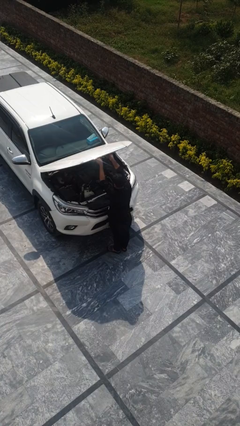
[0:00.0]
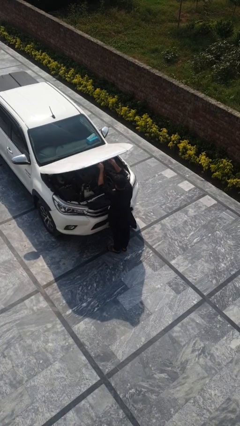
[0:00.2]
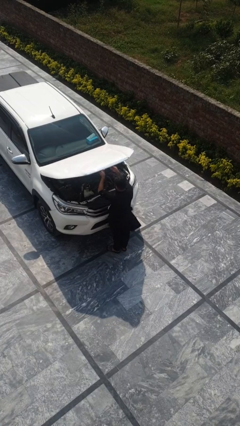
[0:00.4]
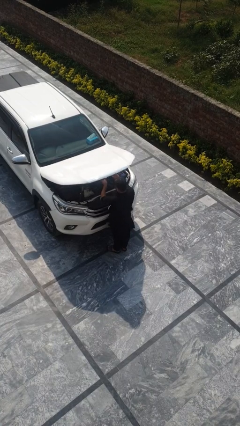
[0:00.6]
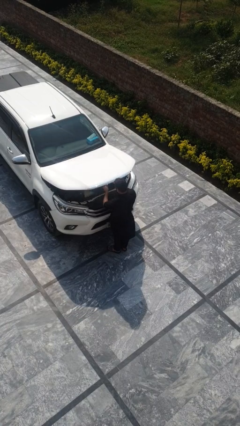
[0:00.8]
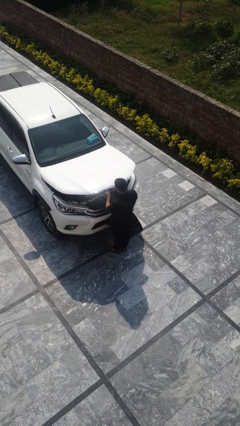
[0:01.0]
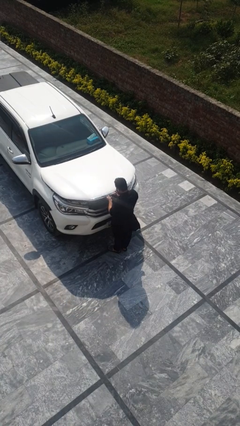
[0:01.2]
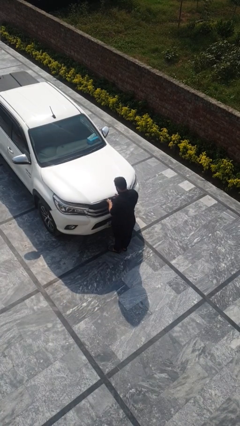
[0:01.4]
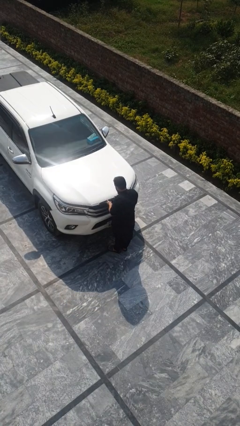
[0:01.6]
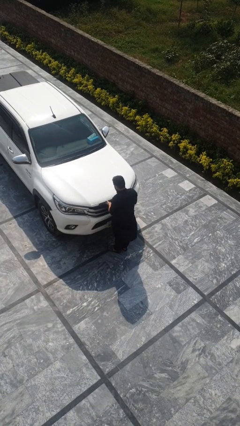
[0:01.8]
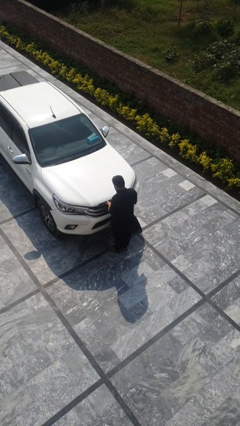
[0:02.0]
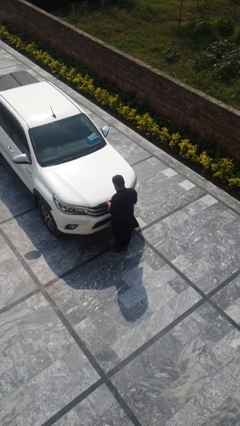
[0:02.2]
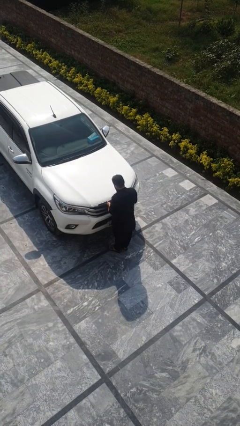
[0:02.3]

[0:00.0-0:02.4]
person closes car hood

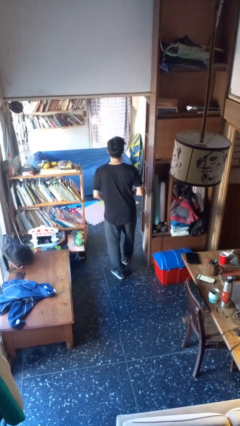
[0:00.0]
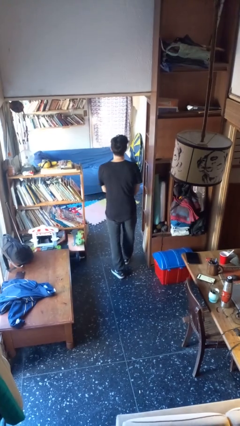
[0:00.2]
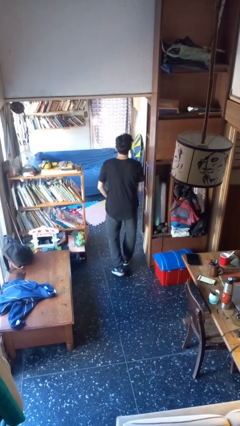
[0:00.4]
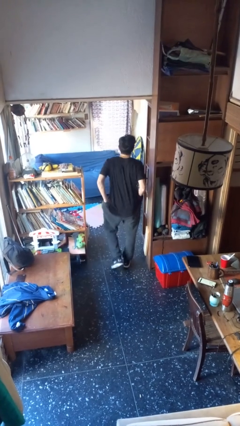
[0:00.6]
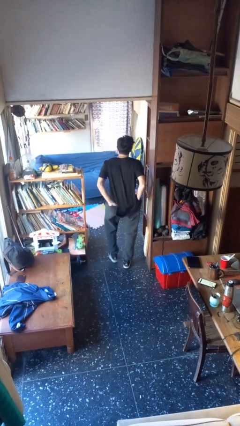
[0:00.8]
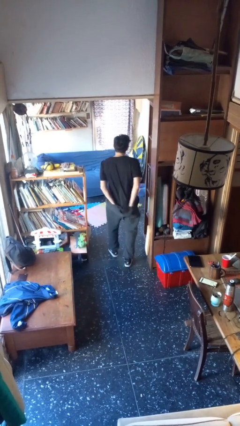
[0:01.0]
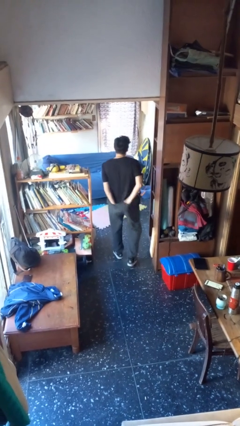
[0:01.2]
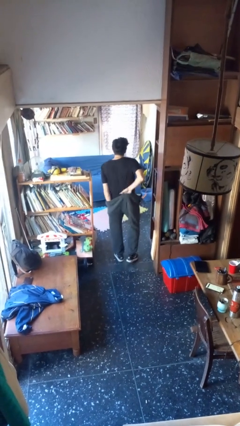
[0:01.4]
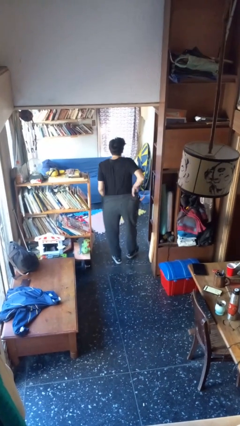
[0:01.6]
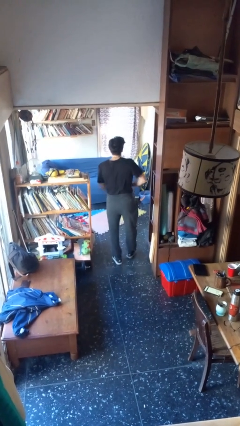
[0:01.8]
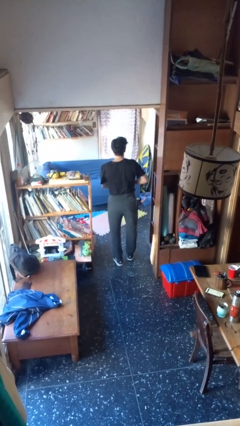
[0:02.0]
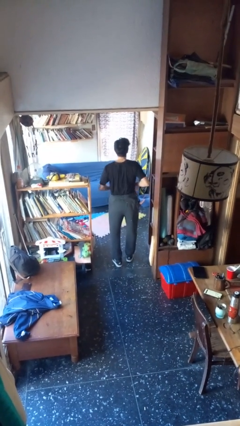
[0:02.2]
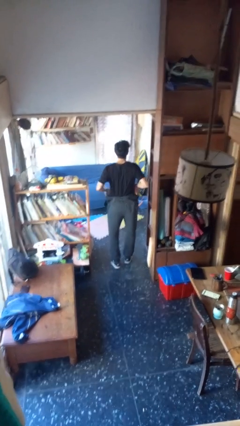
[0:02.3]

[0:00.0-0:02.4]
person tucks in shirt

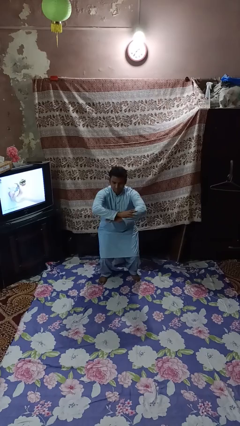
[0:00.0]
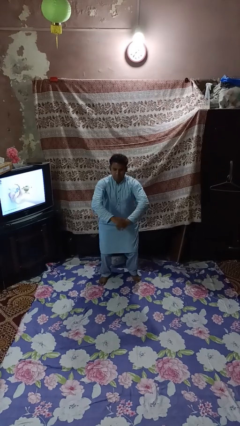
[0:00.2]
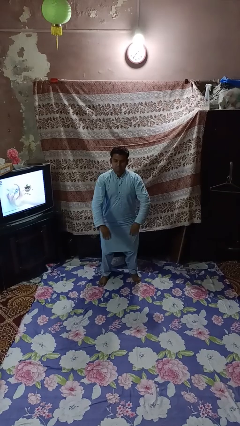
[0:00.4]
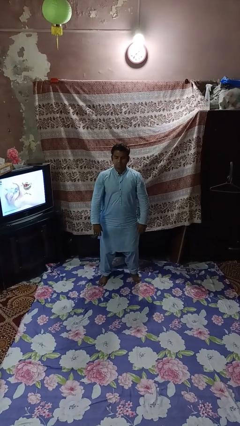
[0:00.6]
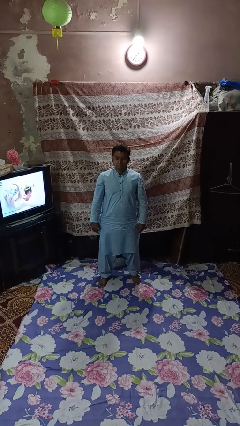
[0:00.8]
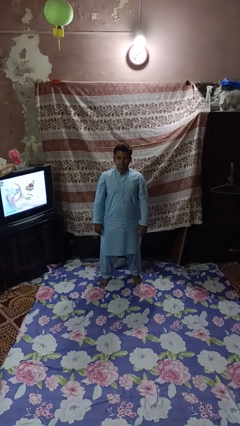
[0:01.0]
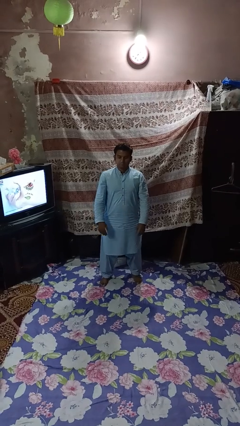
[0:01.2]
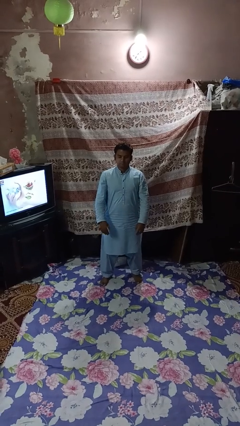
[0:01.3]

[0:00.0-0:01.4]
person stands up

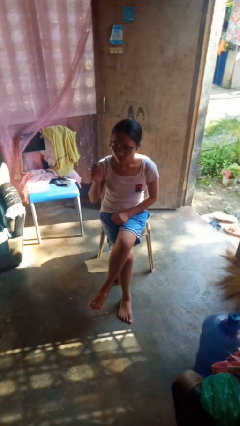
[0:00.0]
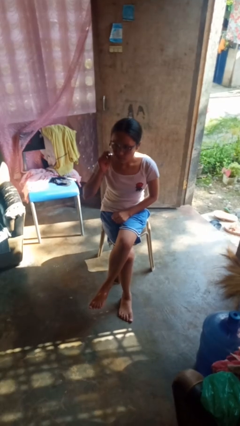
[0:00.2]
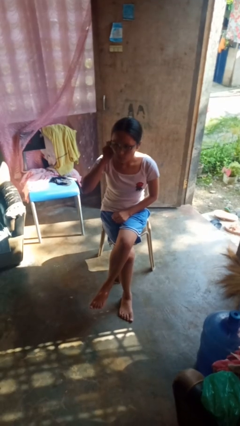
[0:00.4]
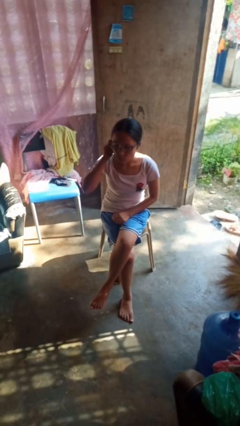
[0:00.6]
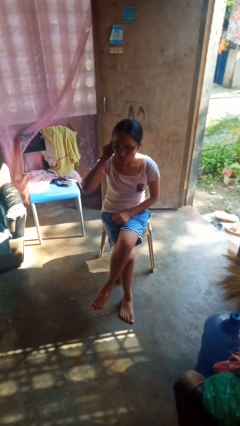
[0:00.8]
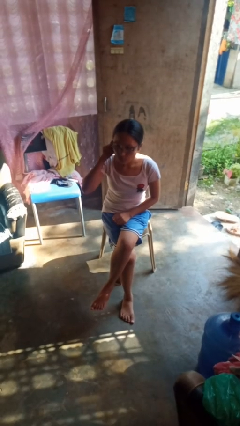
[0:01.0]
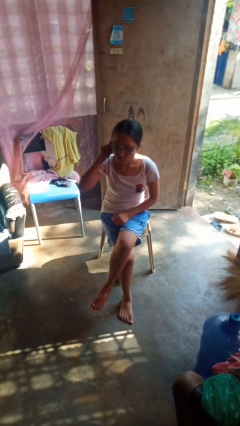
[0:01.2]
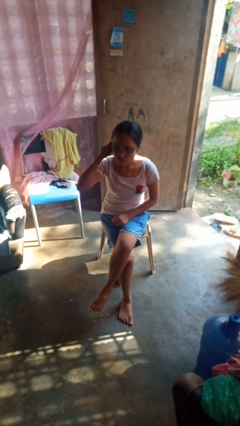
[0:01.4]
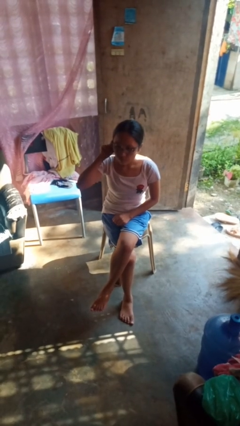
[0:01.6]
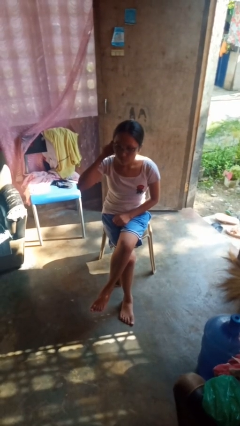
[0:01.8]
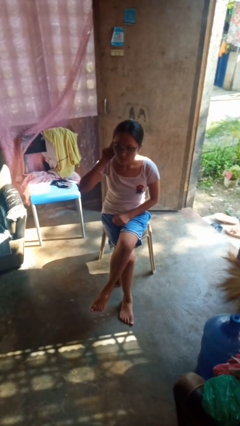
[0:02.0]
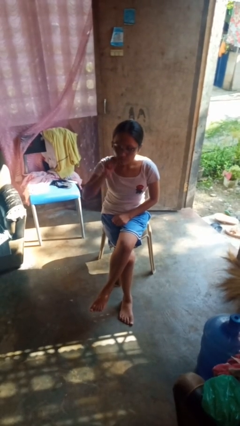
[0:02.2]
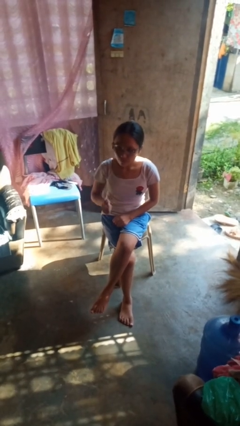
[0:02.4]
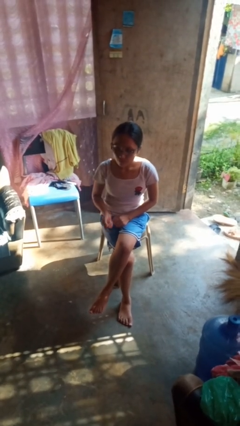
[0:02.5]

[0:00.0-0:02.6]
person touches earlobe

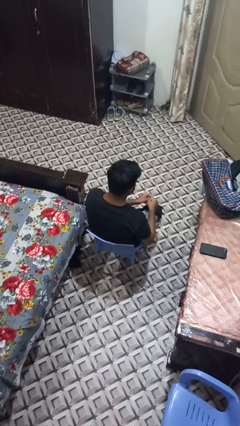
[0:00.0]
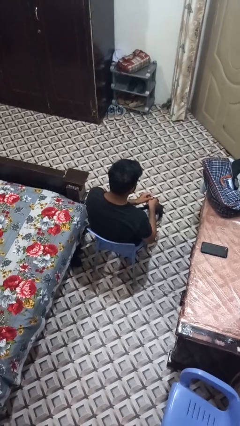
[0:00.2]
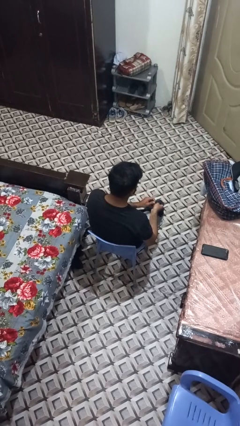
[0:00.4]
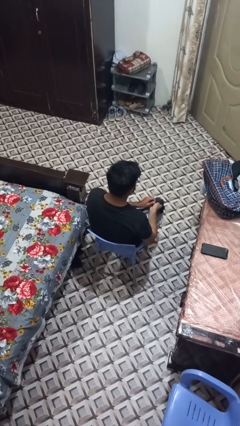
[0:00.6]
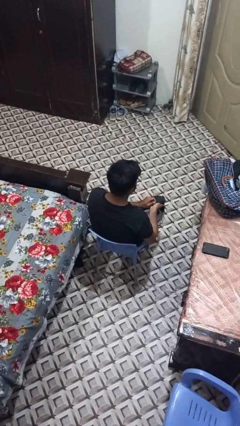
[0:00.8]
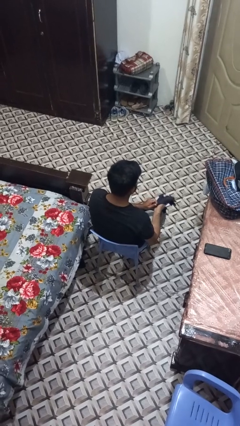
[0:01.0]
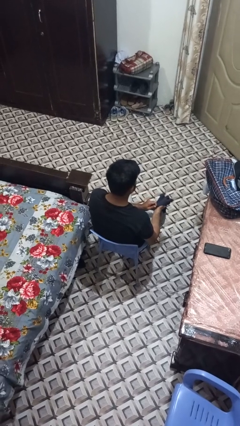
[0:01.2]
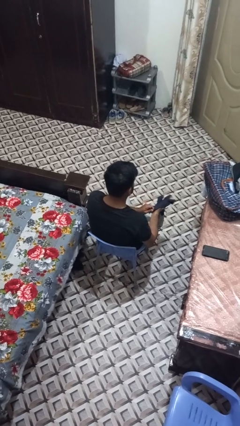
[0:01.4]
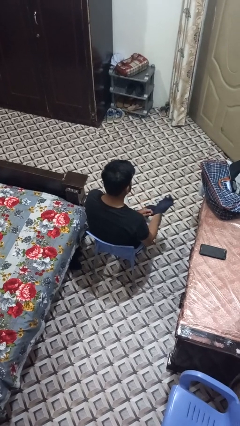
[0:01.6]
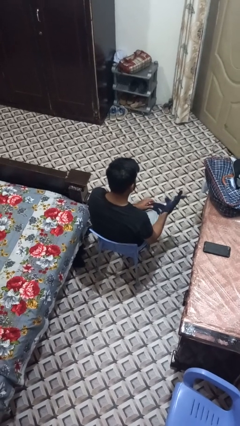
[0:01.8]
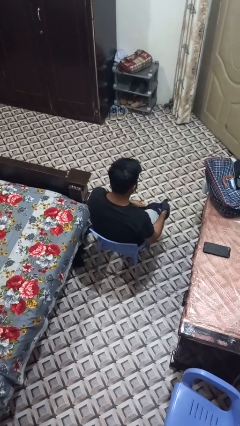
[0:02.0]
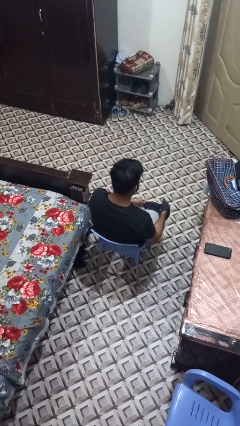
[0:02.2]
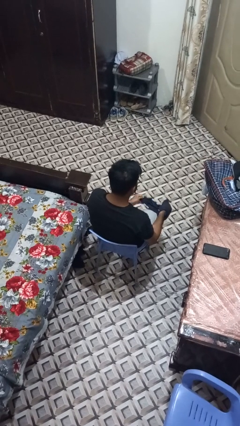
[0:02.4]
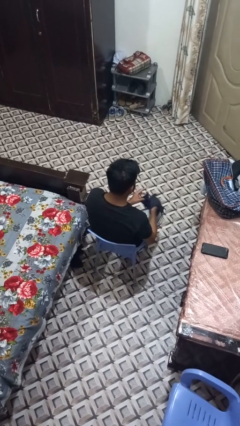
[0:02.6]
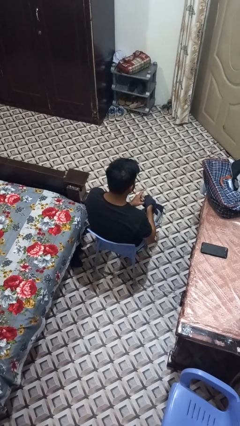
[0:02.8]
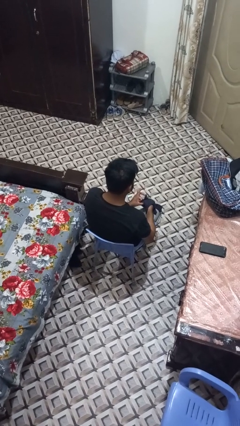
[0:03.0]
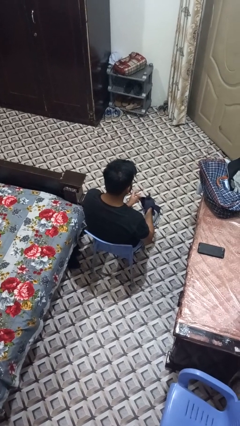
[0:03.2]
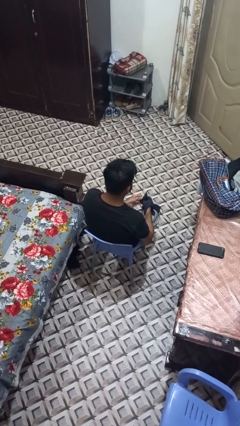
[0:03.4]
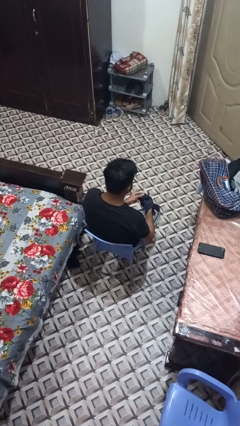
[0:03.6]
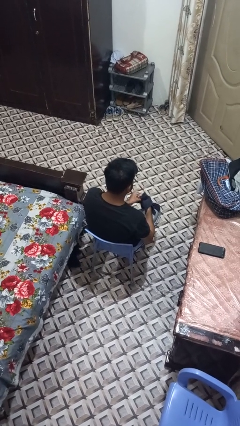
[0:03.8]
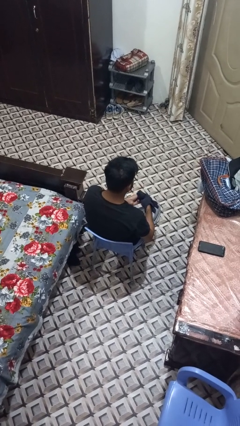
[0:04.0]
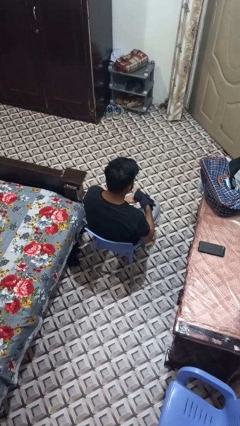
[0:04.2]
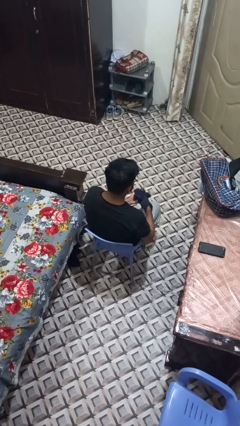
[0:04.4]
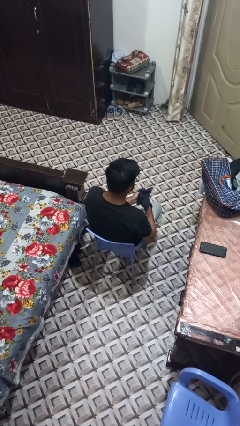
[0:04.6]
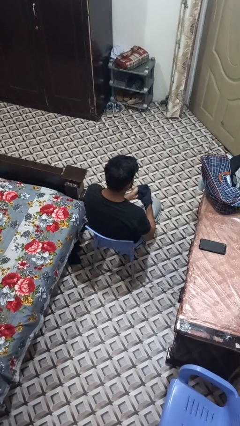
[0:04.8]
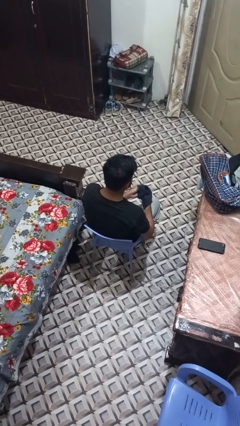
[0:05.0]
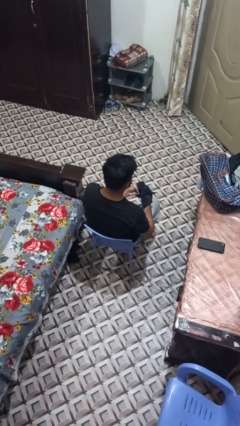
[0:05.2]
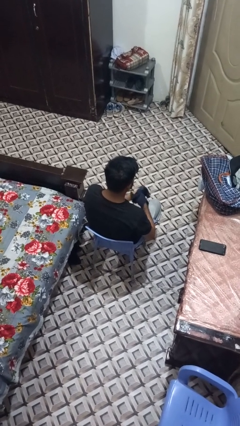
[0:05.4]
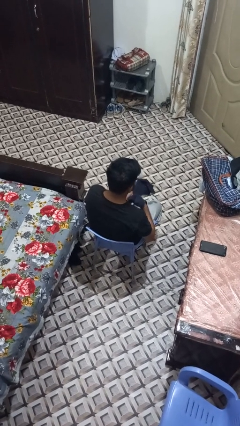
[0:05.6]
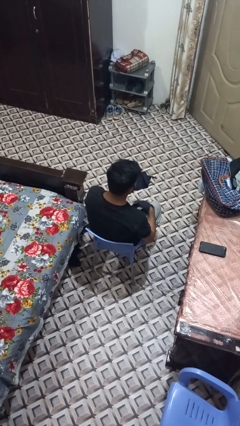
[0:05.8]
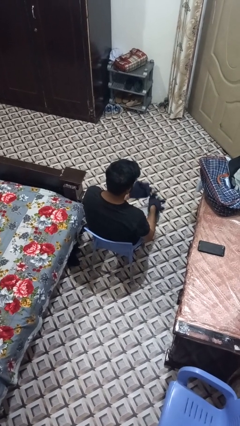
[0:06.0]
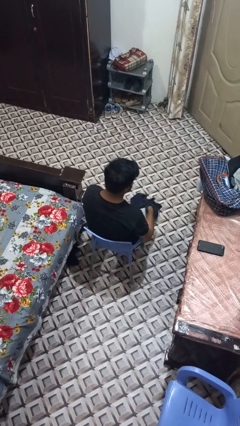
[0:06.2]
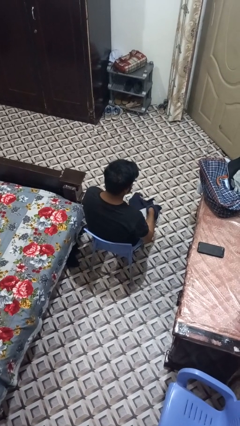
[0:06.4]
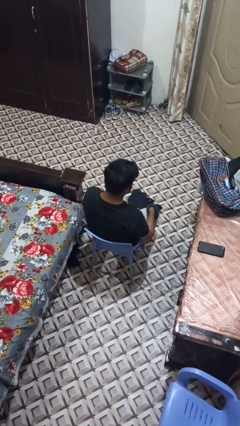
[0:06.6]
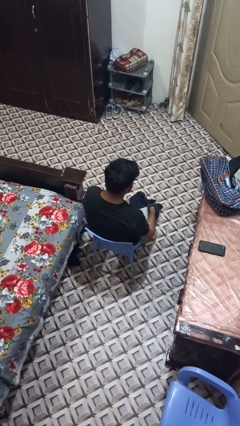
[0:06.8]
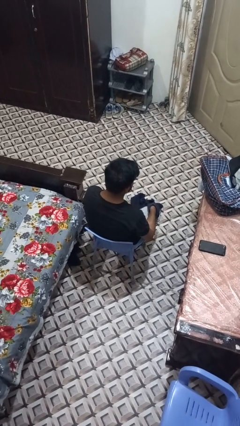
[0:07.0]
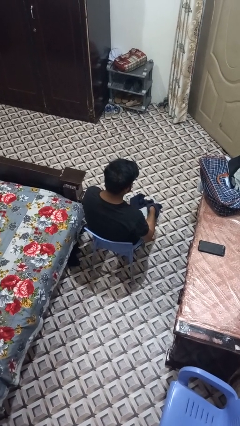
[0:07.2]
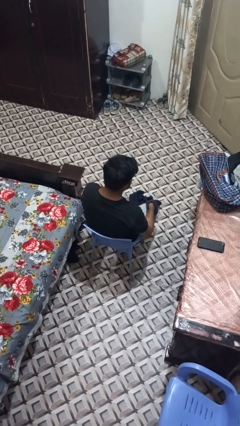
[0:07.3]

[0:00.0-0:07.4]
person puts on gloves

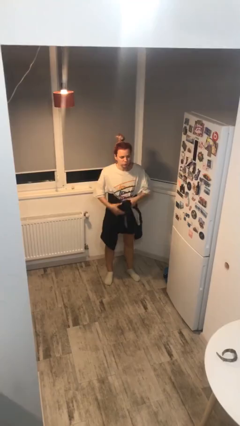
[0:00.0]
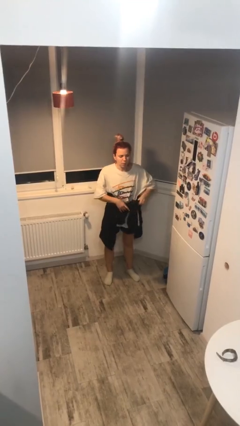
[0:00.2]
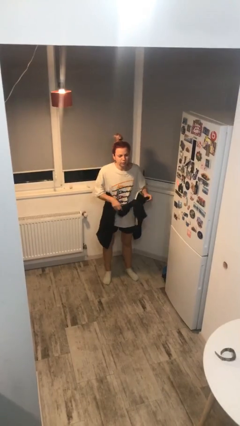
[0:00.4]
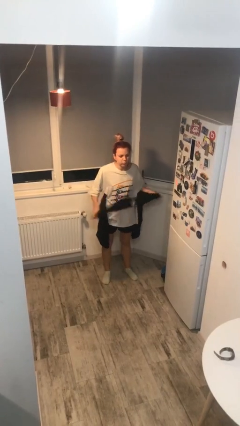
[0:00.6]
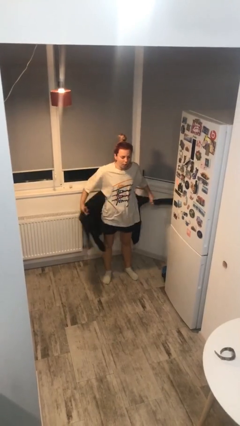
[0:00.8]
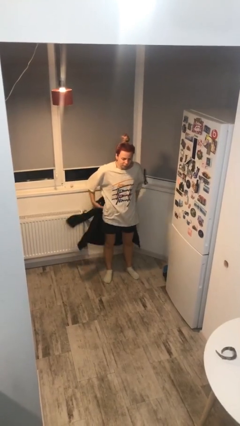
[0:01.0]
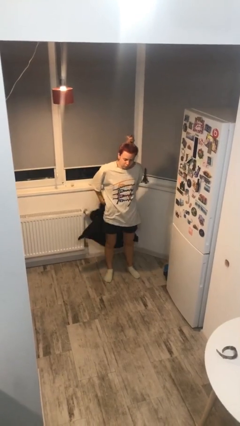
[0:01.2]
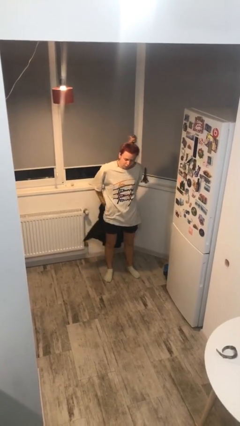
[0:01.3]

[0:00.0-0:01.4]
person unties jacket around waist

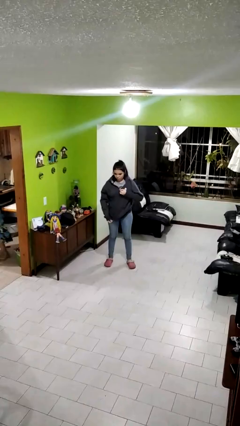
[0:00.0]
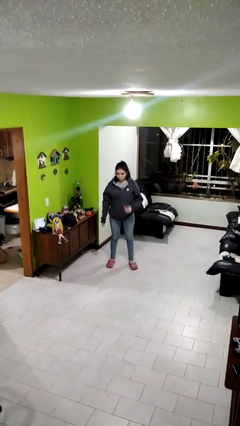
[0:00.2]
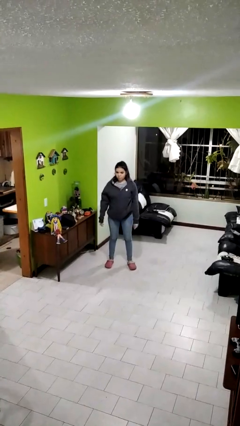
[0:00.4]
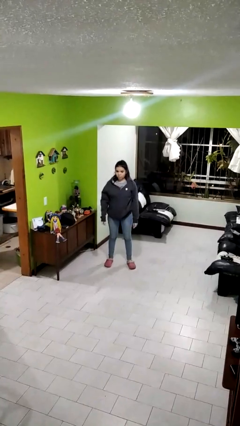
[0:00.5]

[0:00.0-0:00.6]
person zips up jacket
